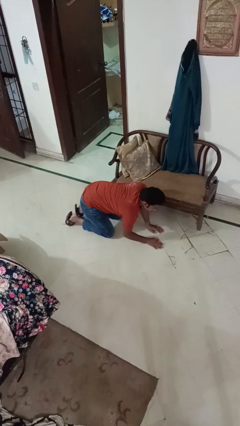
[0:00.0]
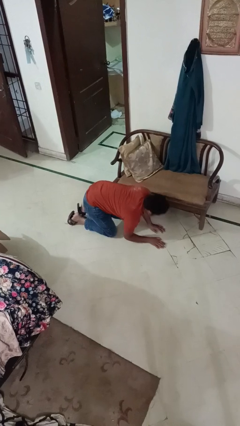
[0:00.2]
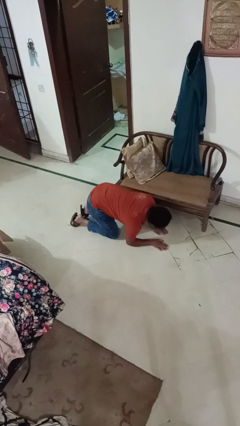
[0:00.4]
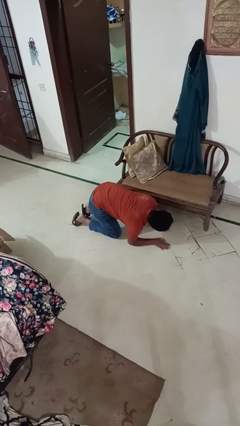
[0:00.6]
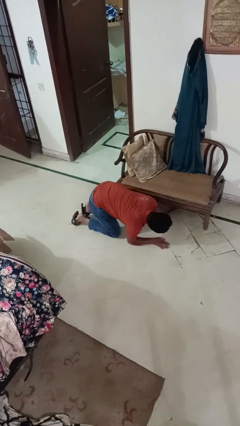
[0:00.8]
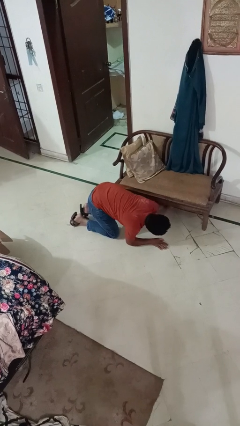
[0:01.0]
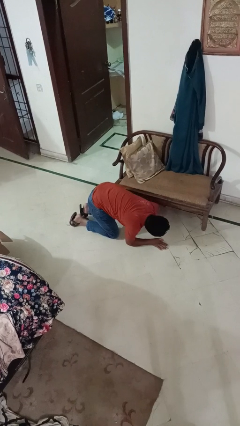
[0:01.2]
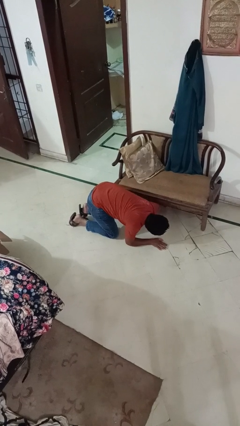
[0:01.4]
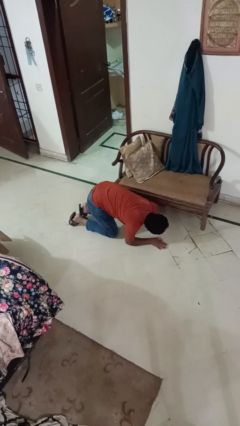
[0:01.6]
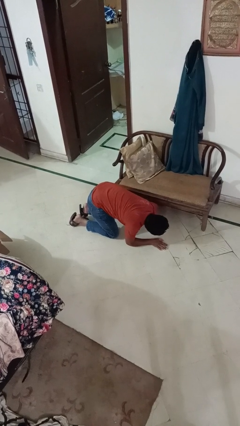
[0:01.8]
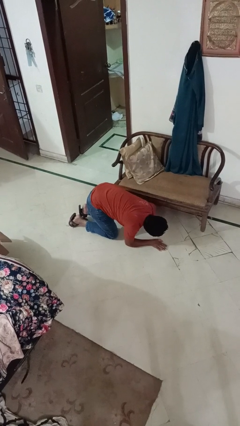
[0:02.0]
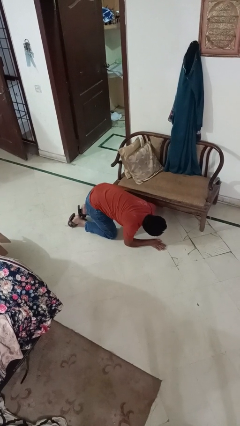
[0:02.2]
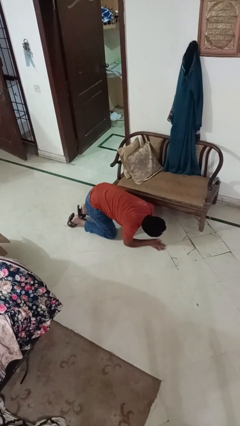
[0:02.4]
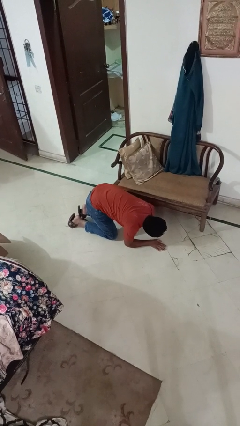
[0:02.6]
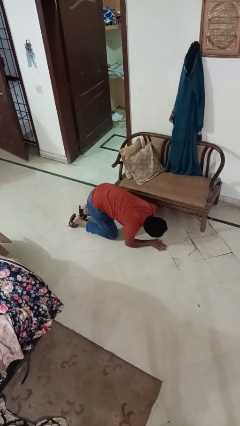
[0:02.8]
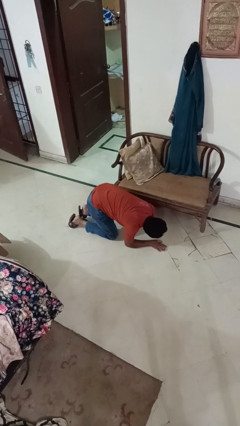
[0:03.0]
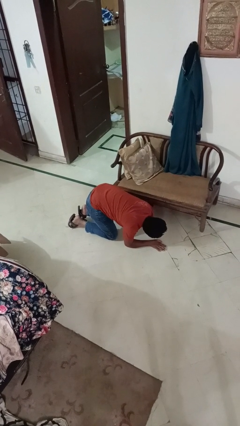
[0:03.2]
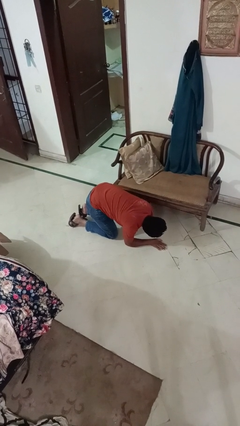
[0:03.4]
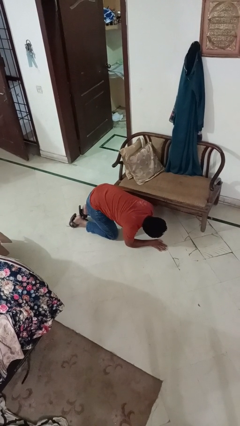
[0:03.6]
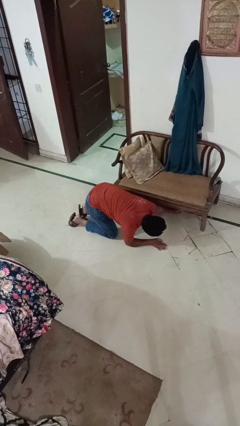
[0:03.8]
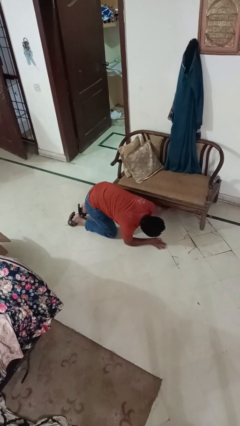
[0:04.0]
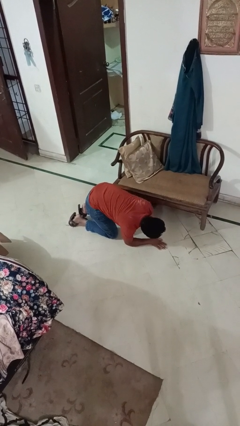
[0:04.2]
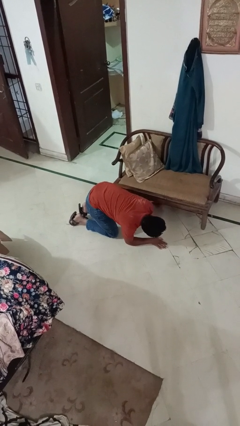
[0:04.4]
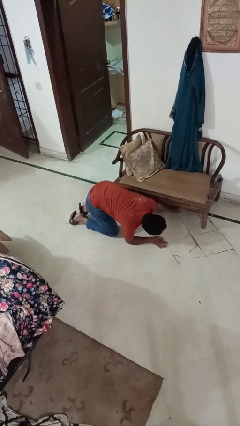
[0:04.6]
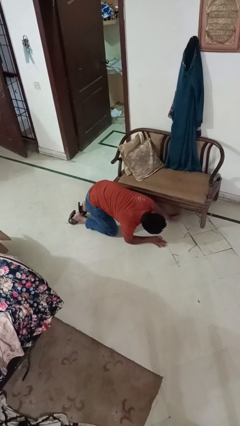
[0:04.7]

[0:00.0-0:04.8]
person searches under couch

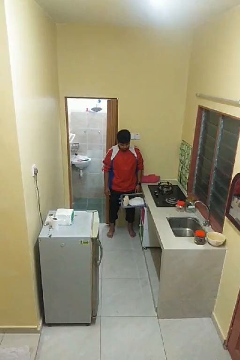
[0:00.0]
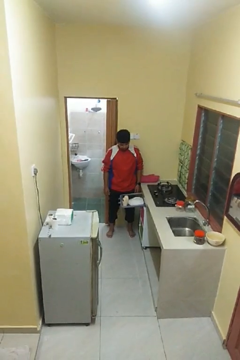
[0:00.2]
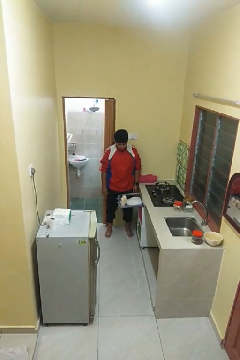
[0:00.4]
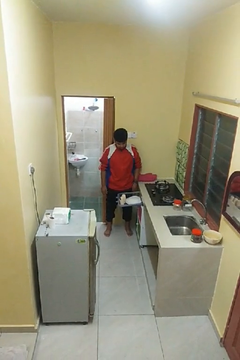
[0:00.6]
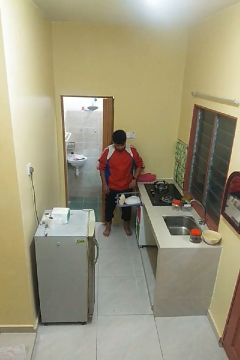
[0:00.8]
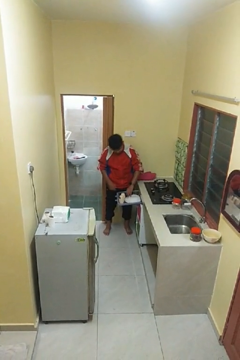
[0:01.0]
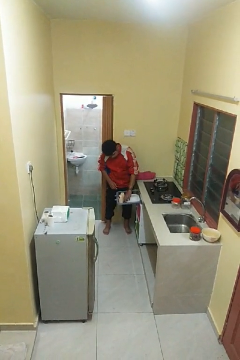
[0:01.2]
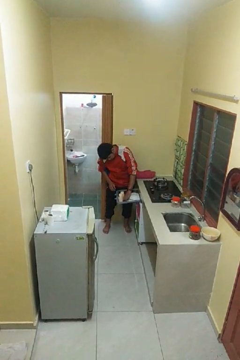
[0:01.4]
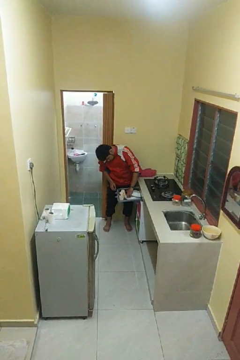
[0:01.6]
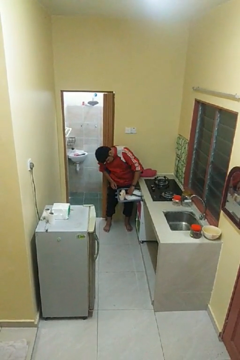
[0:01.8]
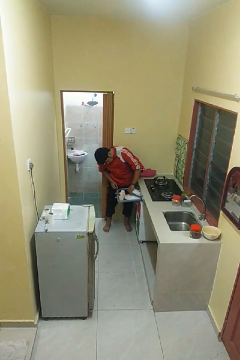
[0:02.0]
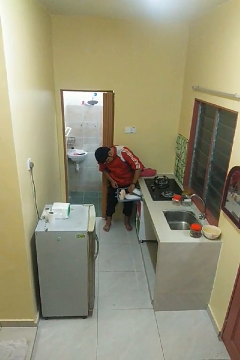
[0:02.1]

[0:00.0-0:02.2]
person searches in kitchen drawer

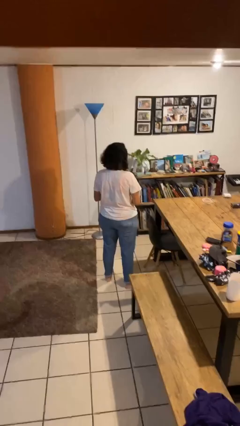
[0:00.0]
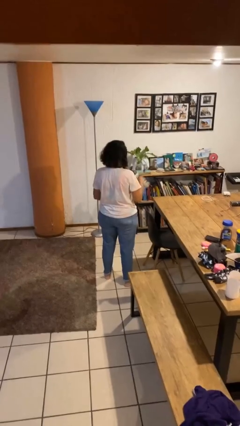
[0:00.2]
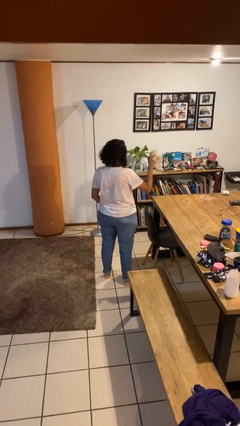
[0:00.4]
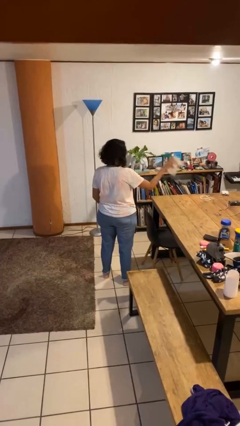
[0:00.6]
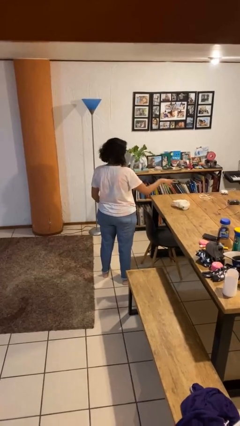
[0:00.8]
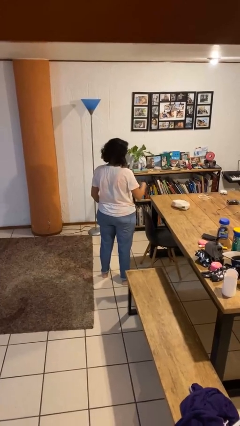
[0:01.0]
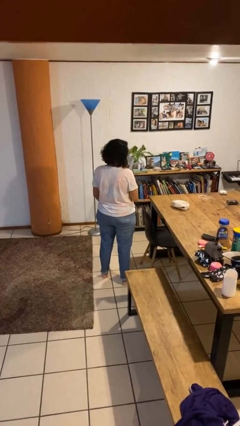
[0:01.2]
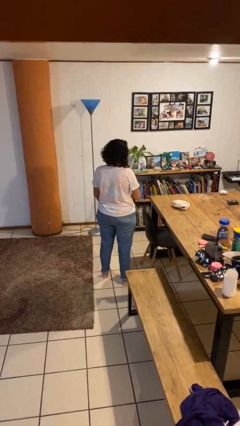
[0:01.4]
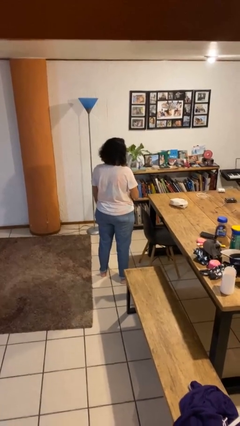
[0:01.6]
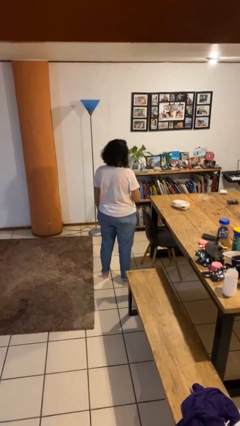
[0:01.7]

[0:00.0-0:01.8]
person throws object on table

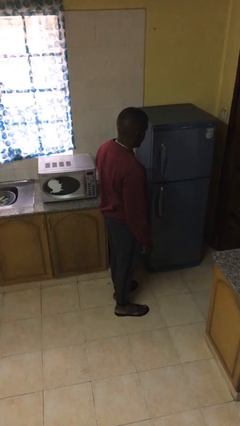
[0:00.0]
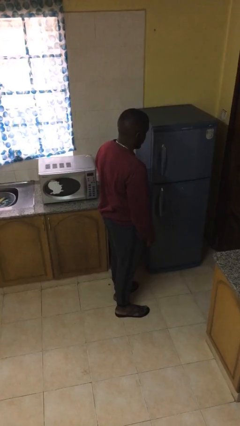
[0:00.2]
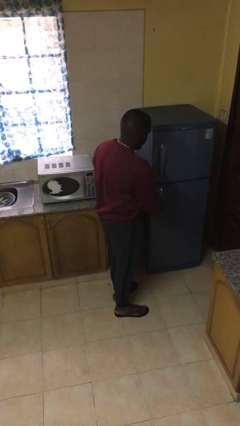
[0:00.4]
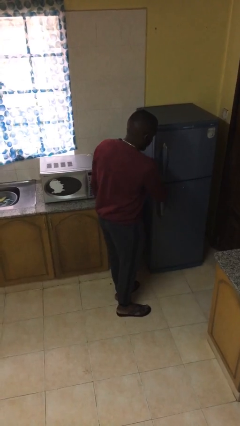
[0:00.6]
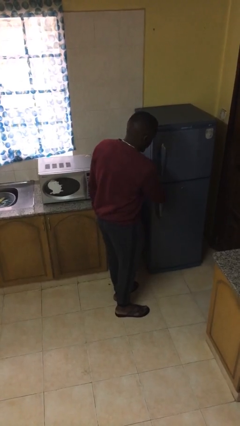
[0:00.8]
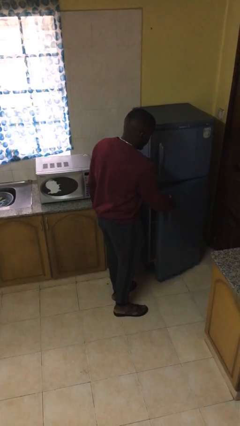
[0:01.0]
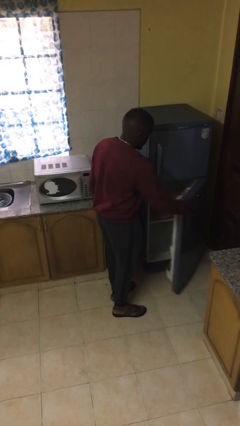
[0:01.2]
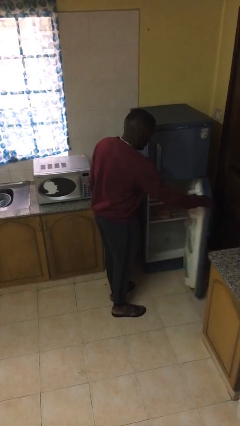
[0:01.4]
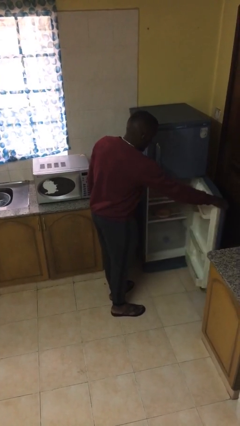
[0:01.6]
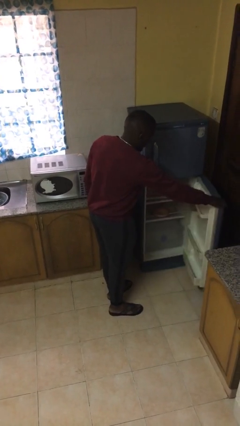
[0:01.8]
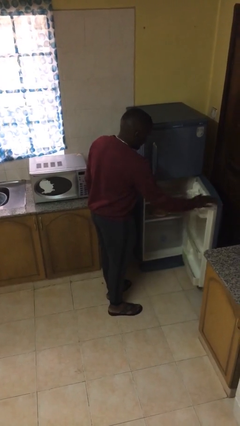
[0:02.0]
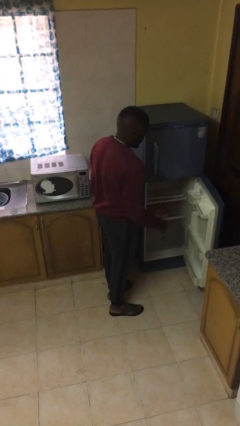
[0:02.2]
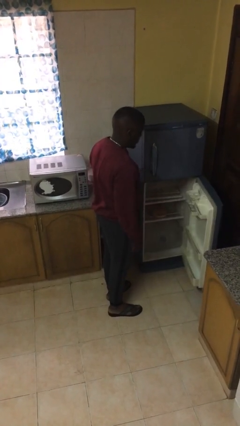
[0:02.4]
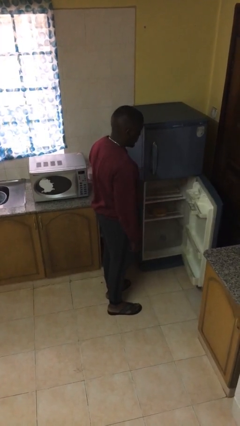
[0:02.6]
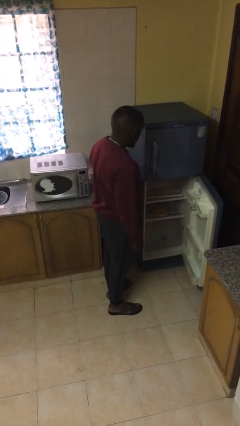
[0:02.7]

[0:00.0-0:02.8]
person opens refrigerator

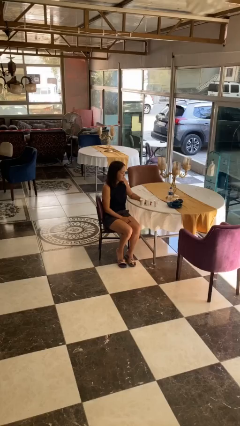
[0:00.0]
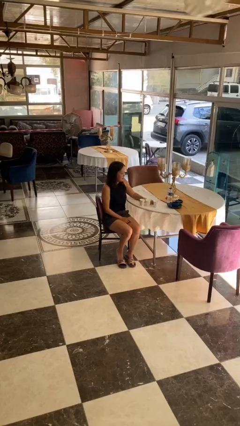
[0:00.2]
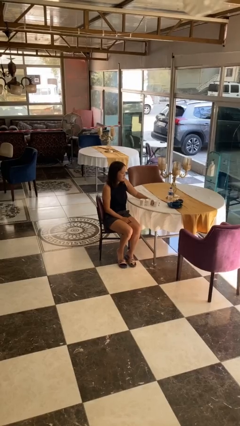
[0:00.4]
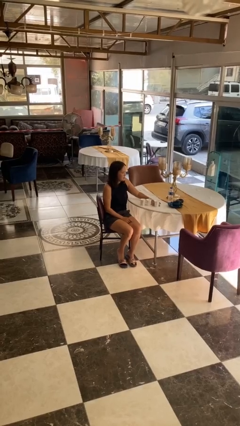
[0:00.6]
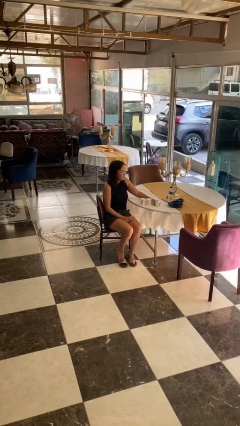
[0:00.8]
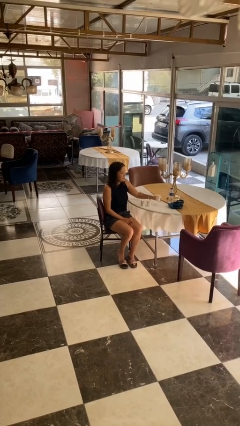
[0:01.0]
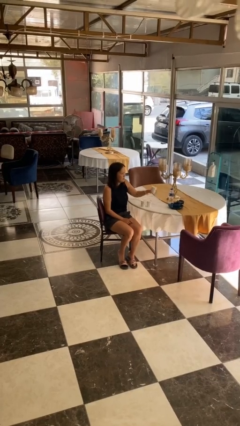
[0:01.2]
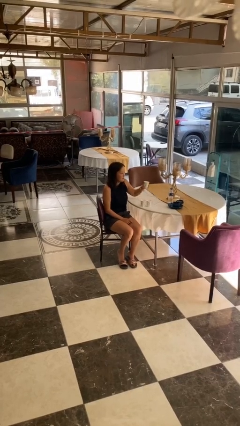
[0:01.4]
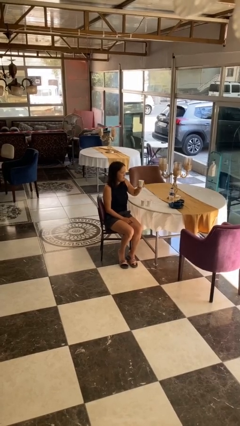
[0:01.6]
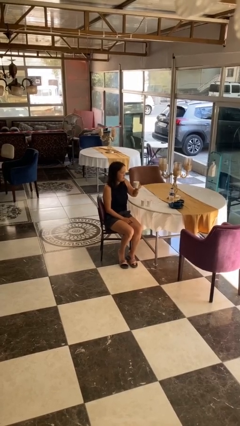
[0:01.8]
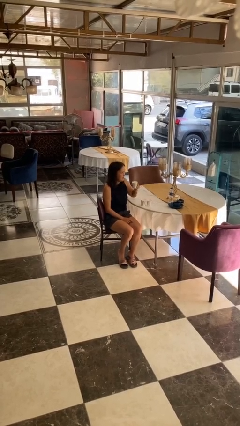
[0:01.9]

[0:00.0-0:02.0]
person picks up object from table

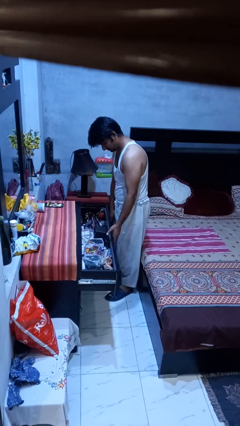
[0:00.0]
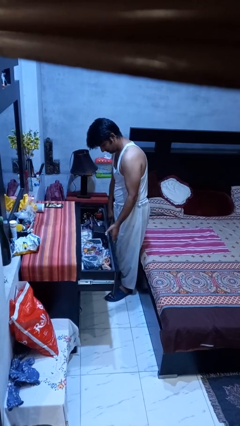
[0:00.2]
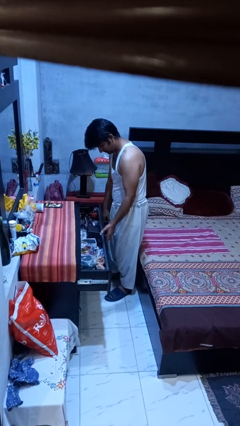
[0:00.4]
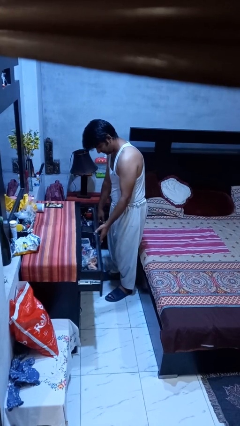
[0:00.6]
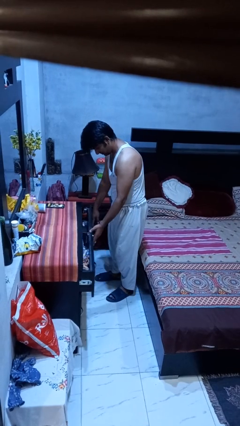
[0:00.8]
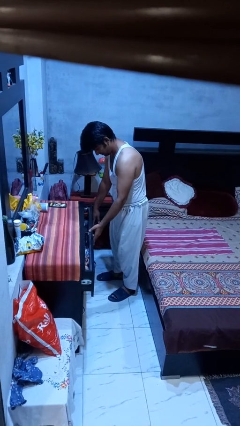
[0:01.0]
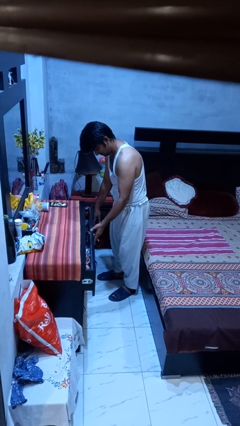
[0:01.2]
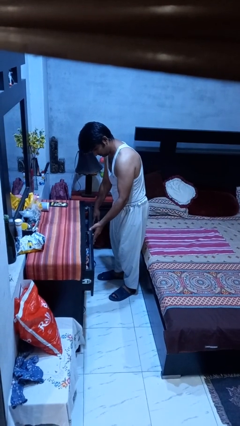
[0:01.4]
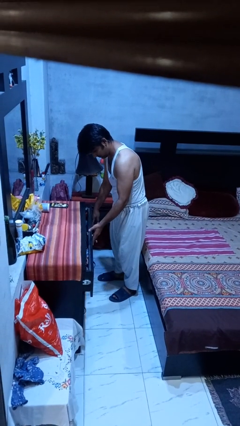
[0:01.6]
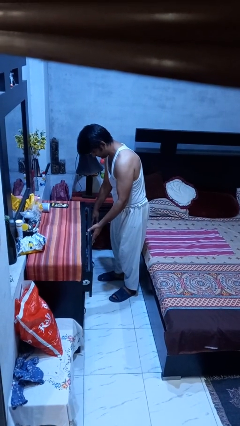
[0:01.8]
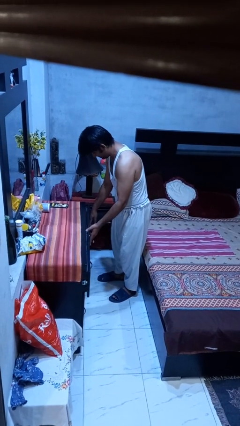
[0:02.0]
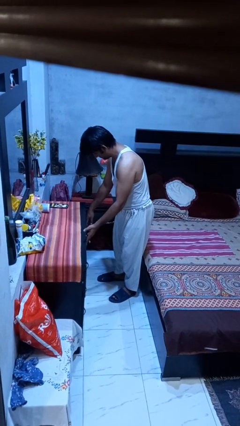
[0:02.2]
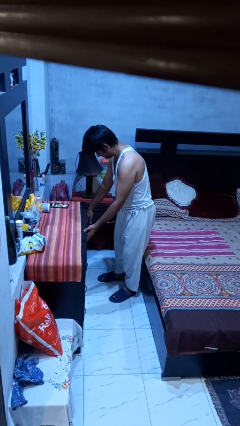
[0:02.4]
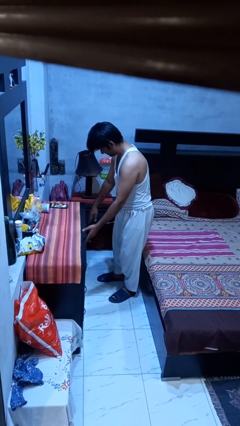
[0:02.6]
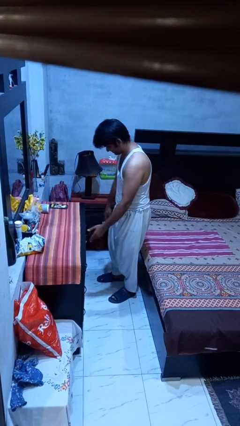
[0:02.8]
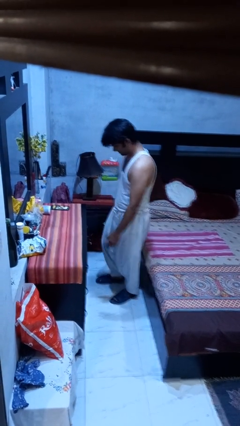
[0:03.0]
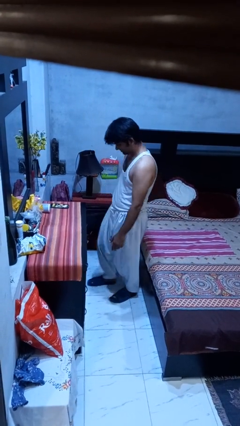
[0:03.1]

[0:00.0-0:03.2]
person closes dresser drawer

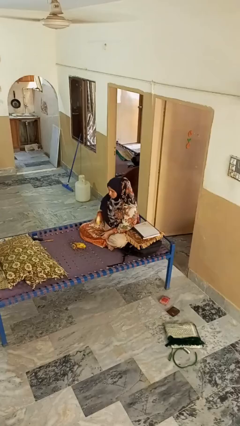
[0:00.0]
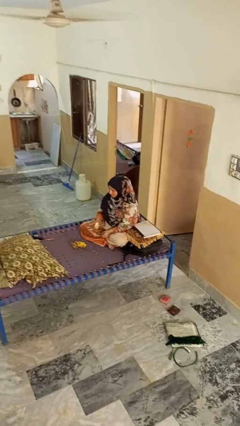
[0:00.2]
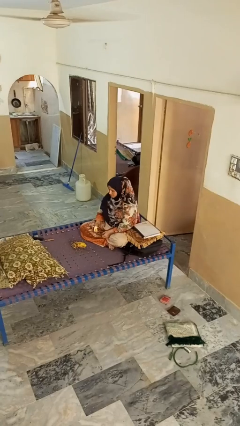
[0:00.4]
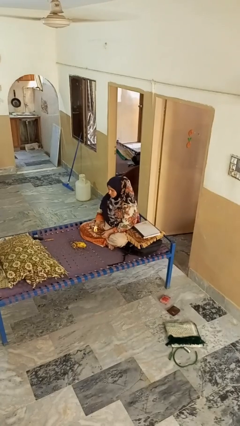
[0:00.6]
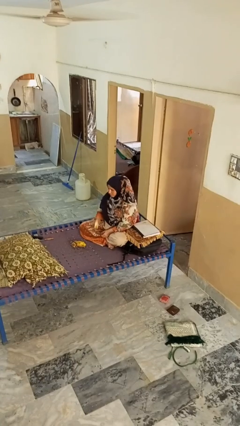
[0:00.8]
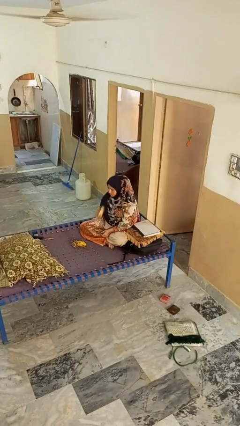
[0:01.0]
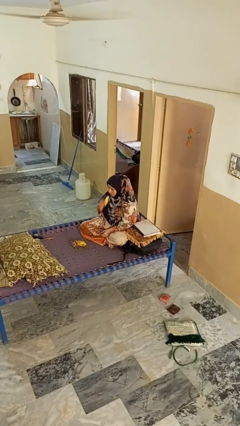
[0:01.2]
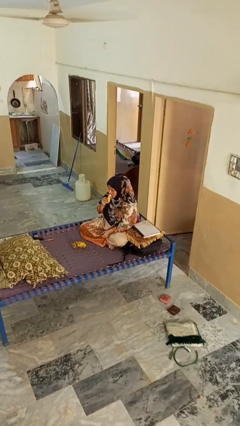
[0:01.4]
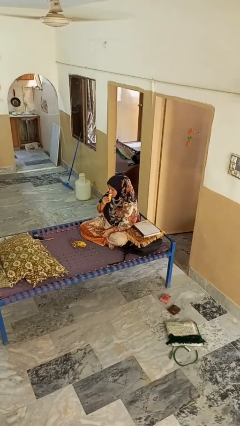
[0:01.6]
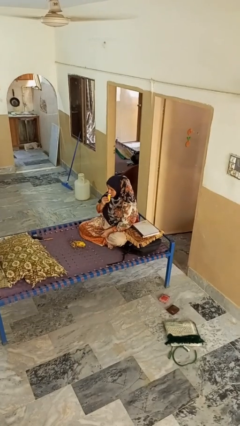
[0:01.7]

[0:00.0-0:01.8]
person eats banana
